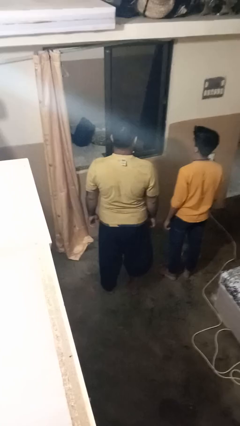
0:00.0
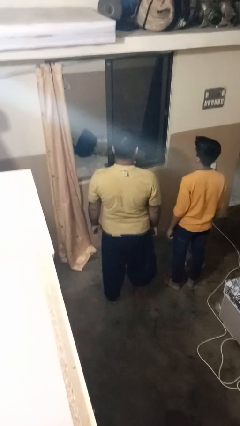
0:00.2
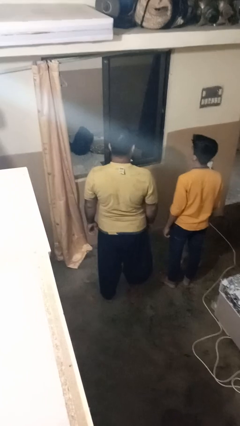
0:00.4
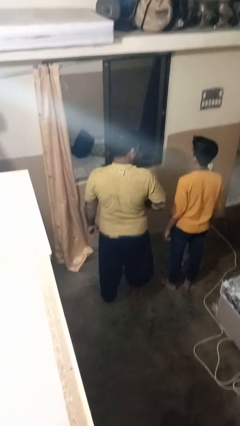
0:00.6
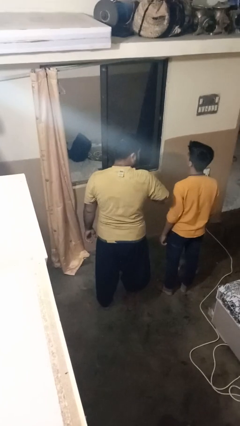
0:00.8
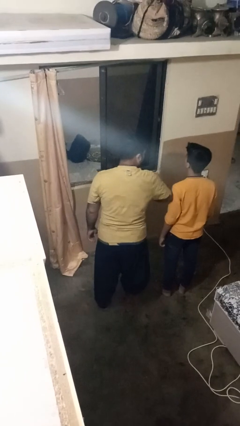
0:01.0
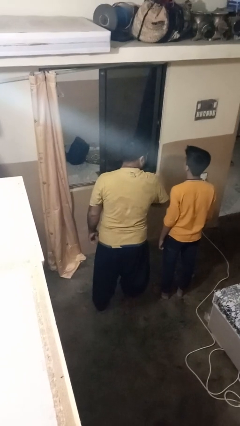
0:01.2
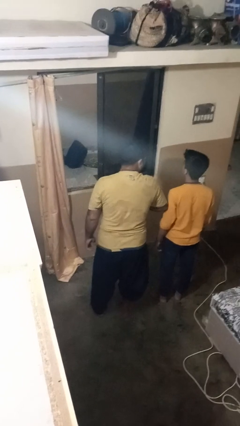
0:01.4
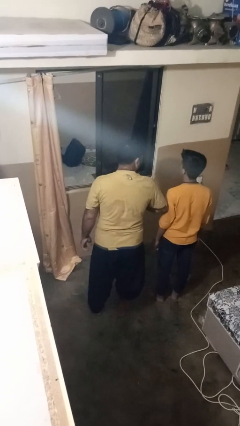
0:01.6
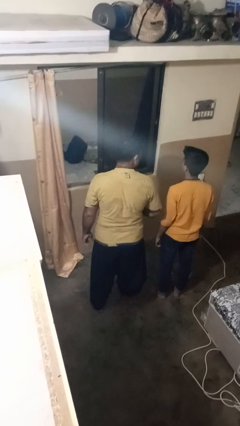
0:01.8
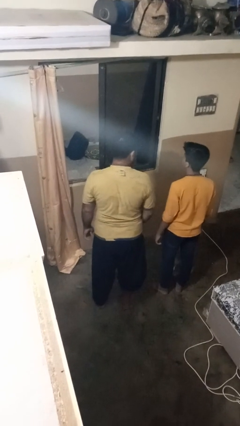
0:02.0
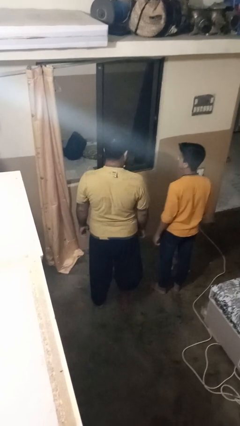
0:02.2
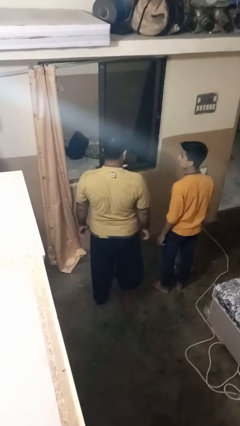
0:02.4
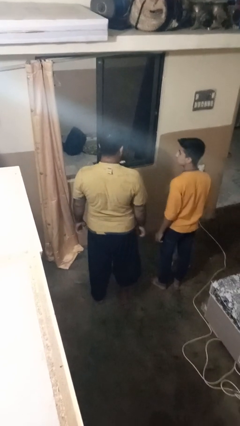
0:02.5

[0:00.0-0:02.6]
person nudges person with elbow

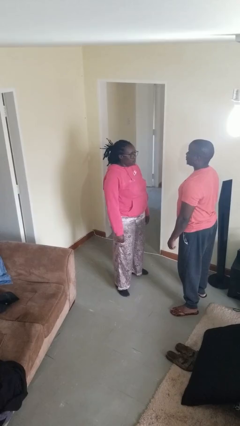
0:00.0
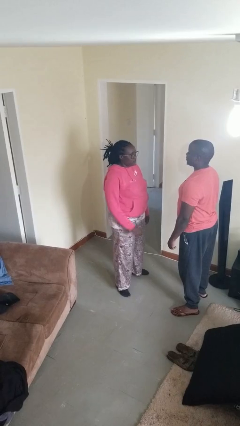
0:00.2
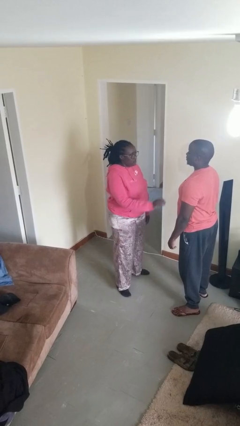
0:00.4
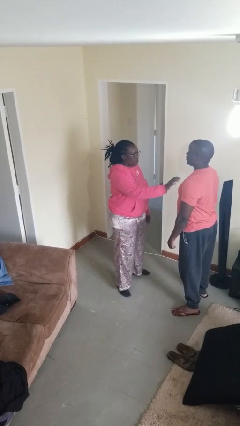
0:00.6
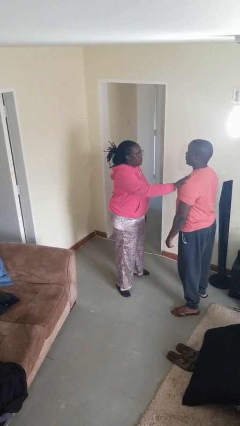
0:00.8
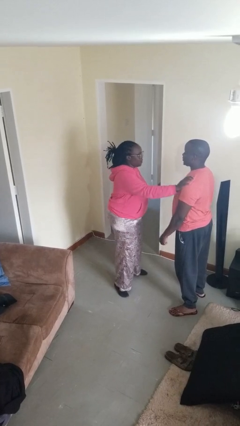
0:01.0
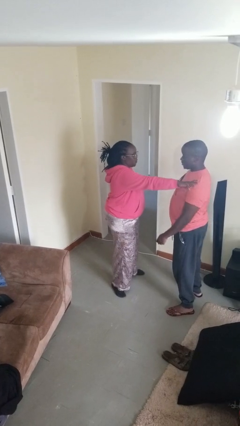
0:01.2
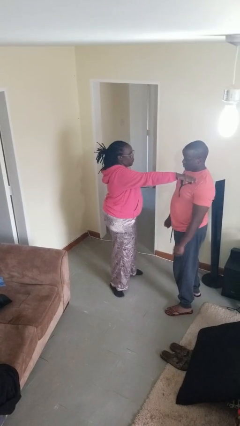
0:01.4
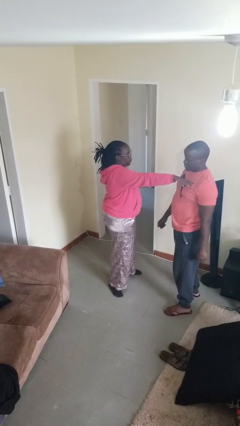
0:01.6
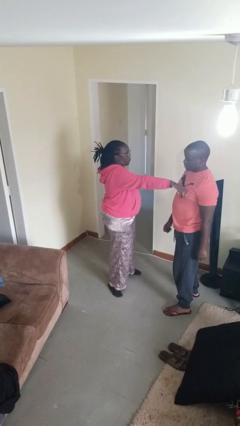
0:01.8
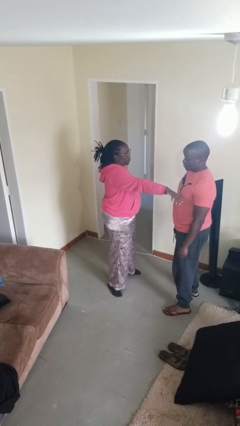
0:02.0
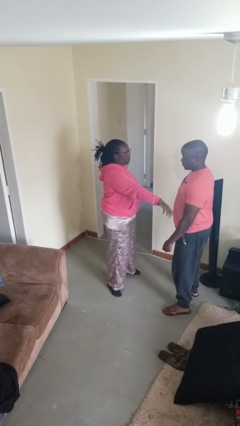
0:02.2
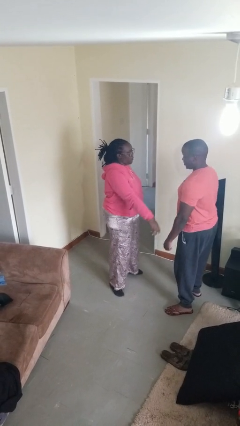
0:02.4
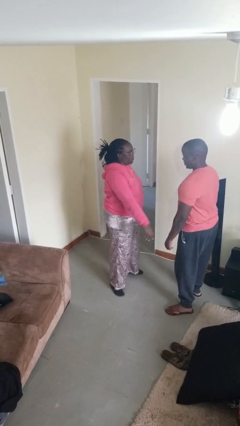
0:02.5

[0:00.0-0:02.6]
person shoves person

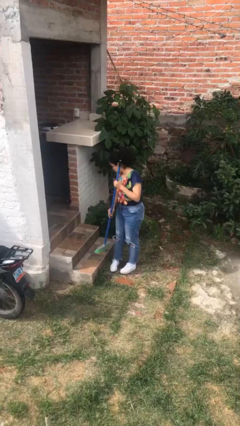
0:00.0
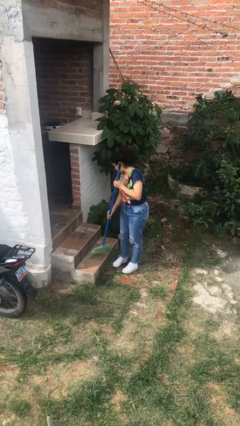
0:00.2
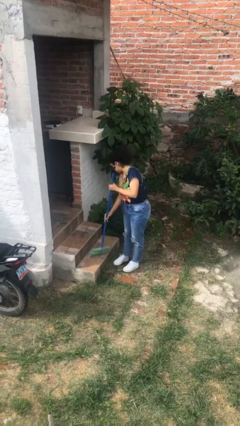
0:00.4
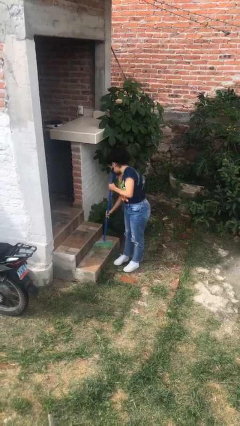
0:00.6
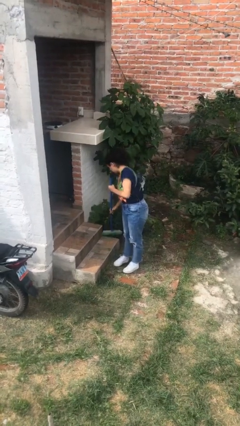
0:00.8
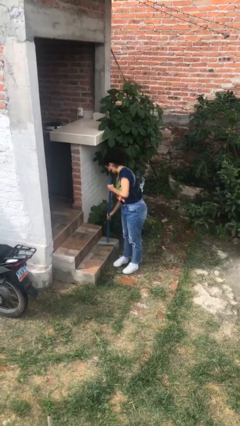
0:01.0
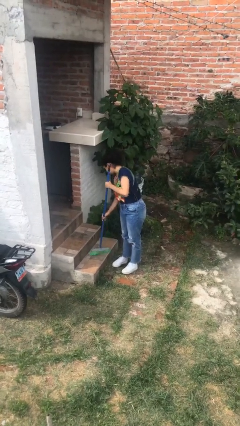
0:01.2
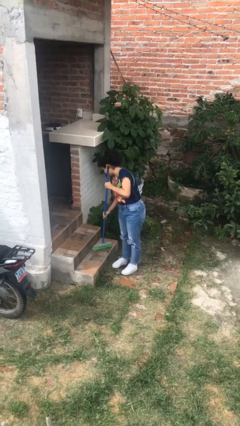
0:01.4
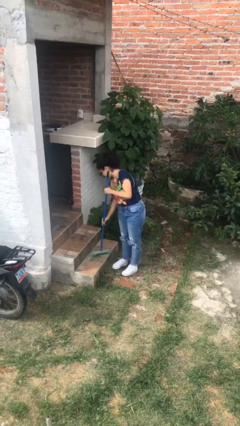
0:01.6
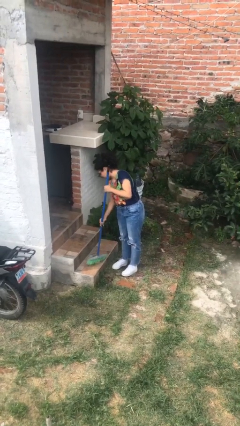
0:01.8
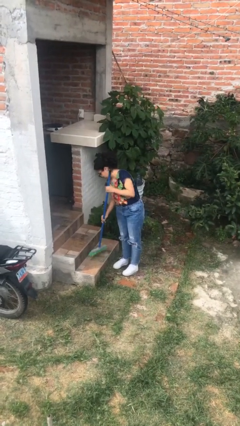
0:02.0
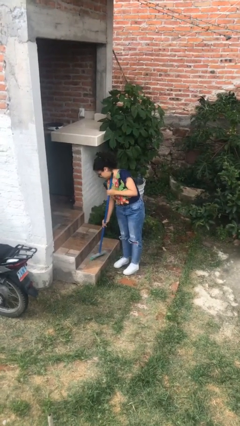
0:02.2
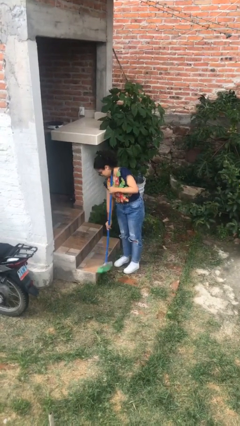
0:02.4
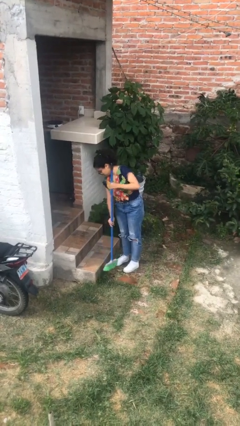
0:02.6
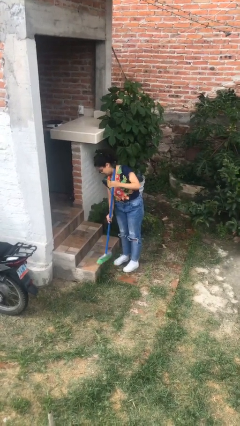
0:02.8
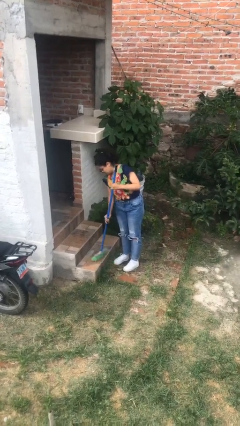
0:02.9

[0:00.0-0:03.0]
person sweeps floor

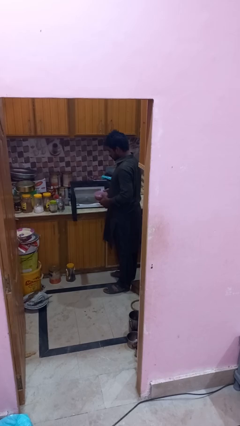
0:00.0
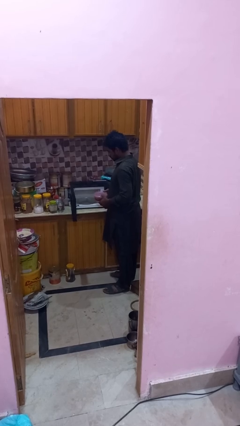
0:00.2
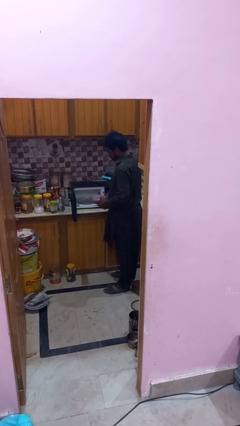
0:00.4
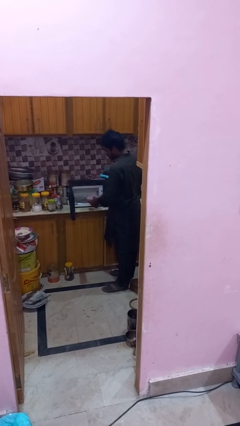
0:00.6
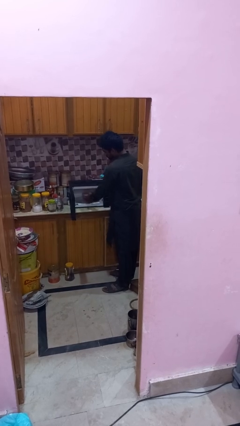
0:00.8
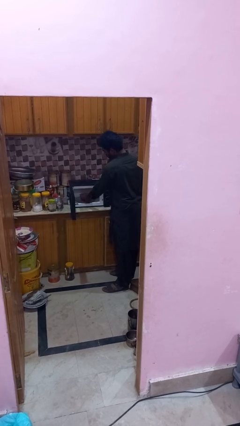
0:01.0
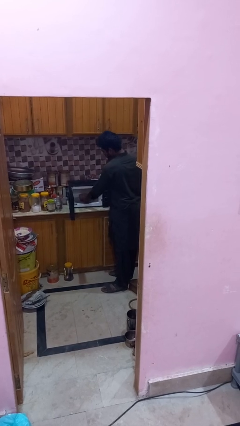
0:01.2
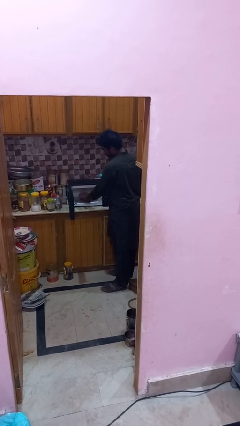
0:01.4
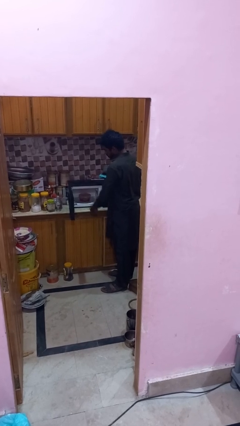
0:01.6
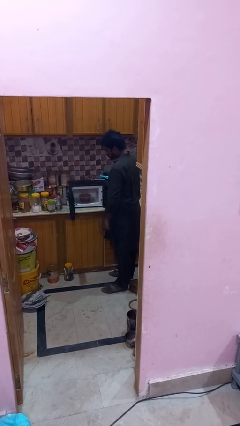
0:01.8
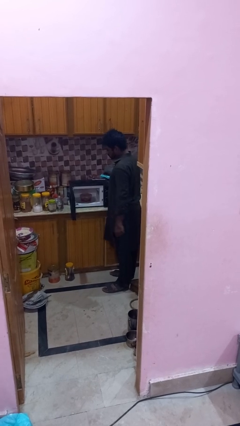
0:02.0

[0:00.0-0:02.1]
person puts object into microwave

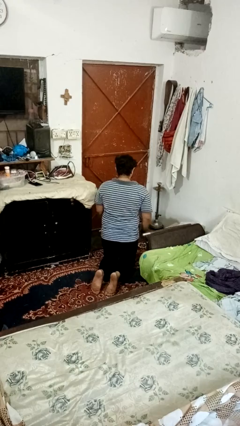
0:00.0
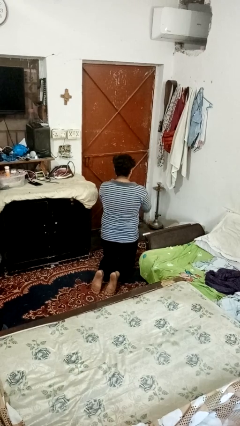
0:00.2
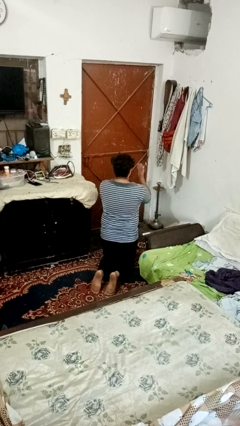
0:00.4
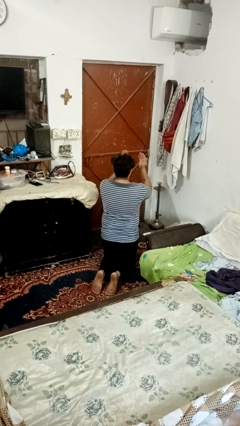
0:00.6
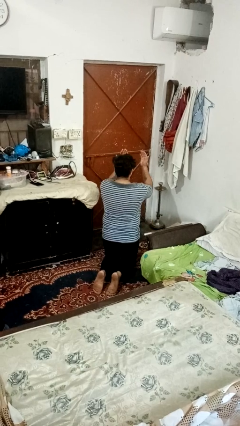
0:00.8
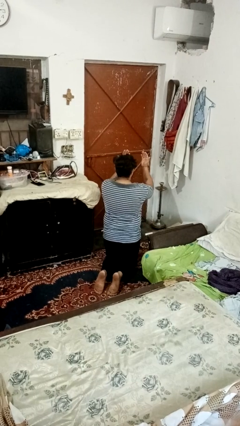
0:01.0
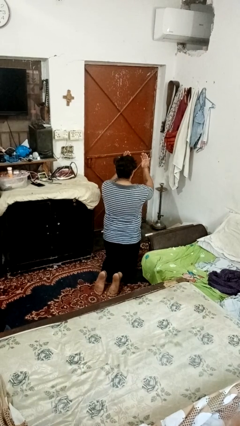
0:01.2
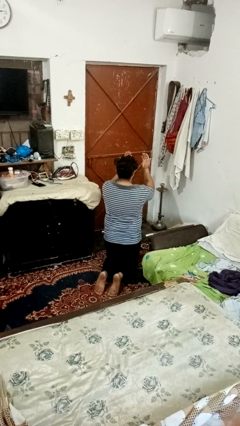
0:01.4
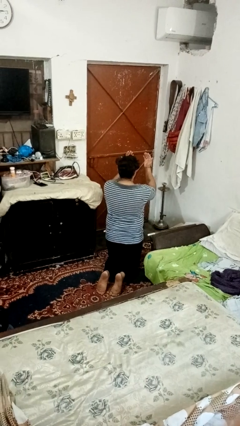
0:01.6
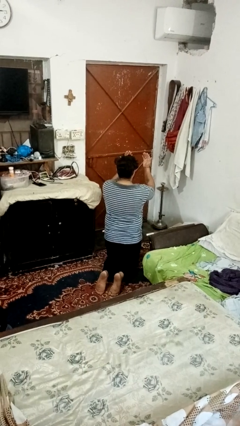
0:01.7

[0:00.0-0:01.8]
person prays

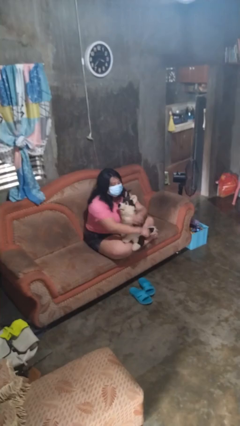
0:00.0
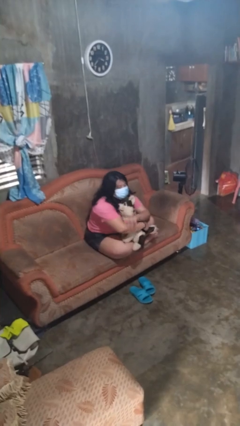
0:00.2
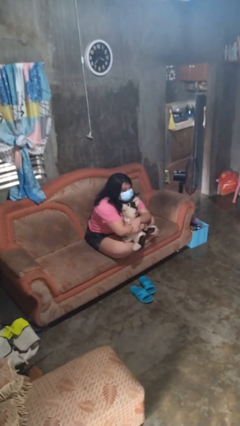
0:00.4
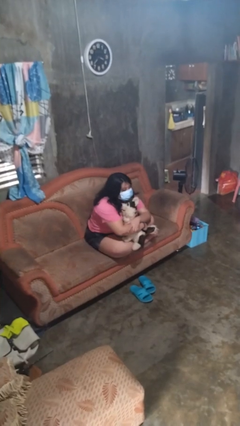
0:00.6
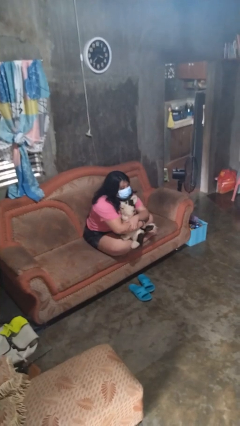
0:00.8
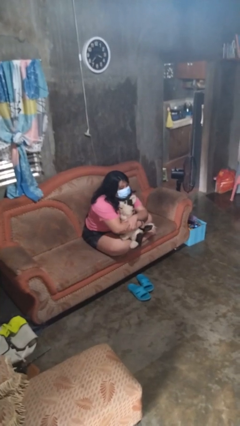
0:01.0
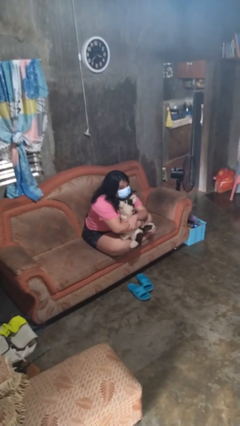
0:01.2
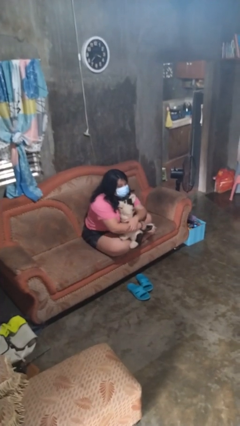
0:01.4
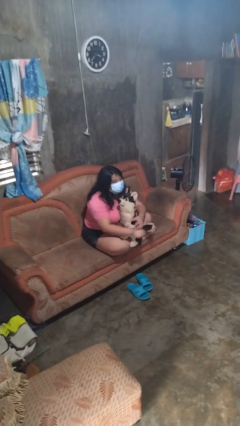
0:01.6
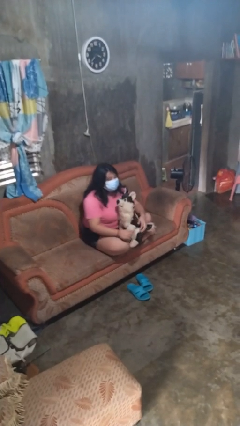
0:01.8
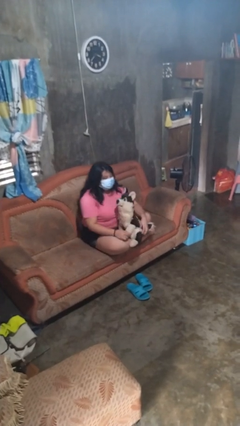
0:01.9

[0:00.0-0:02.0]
person hugs stuffed animal

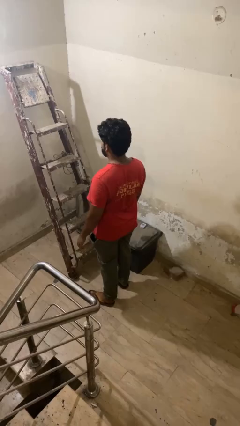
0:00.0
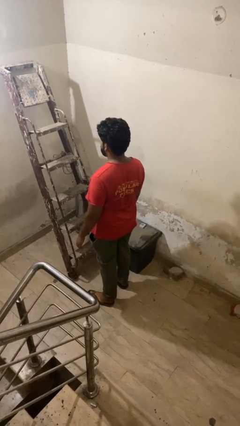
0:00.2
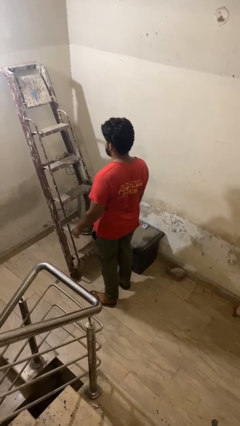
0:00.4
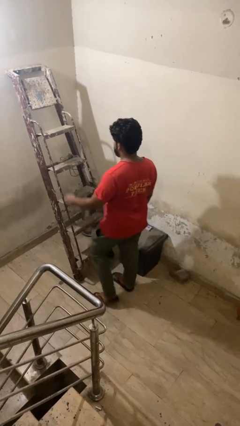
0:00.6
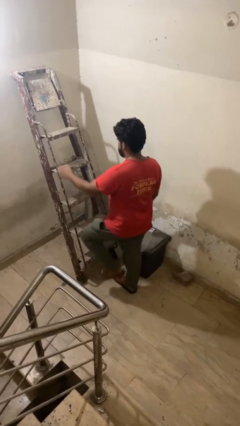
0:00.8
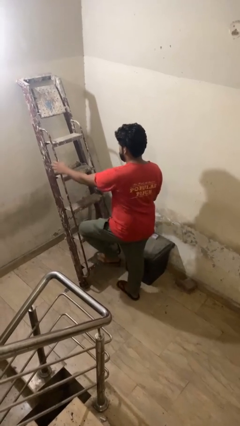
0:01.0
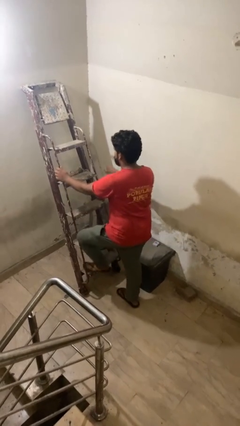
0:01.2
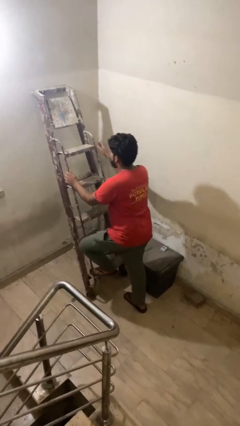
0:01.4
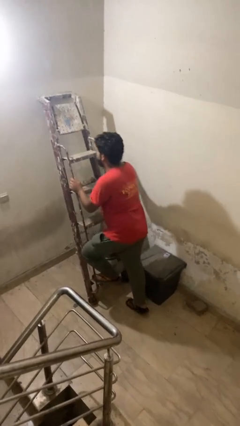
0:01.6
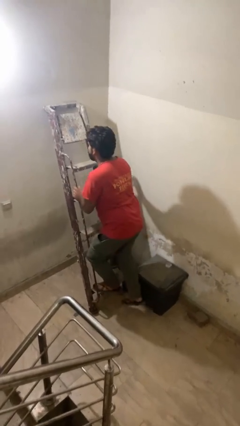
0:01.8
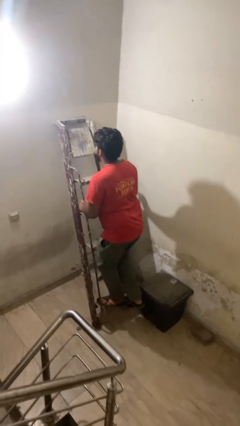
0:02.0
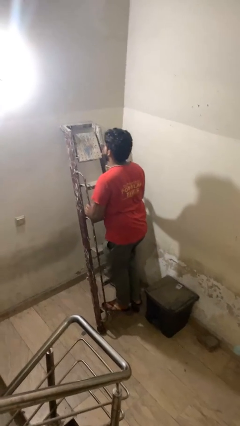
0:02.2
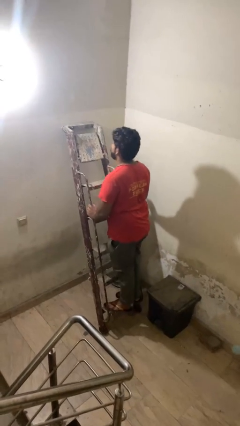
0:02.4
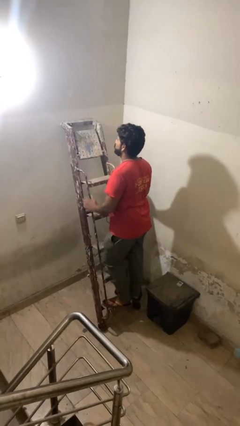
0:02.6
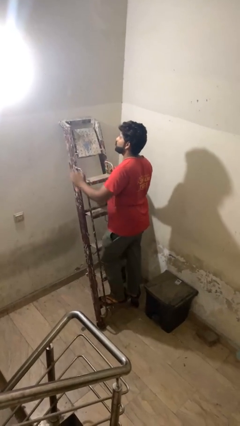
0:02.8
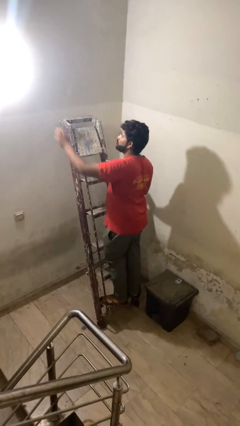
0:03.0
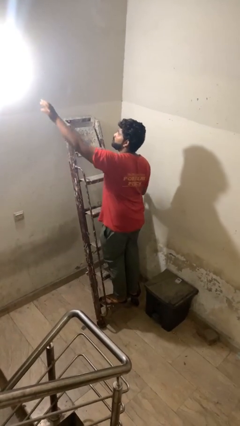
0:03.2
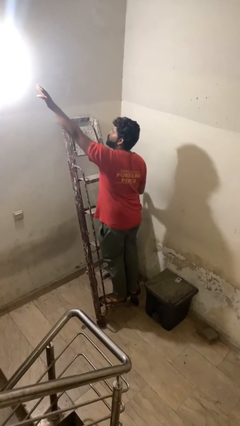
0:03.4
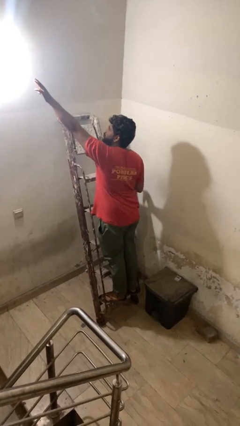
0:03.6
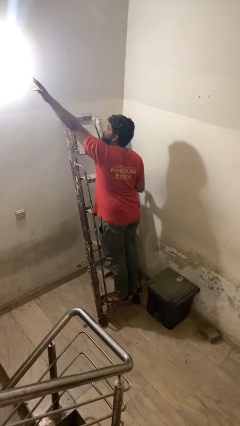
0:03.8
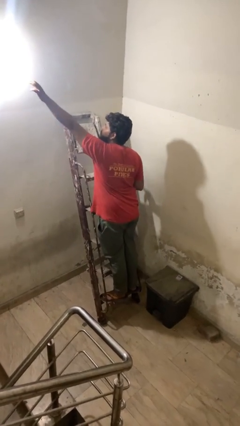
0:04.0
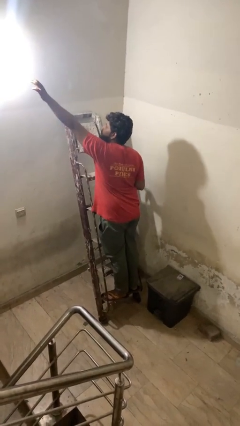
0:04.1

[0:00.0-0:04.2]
person climbs up ladder
